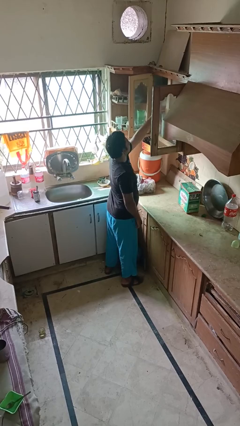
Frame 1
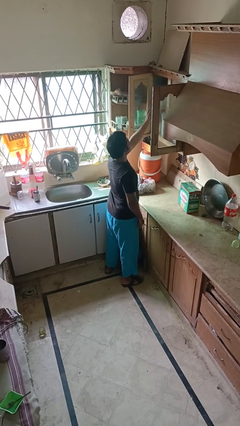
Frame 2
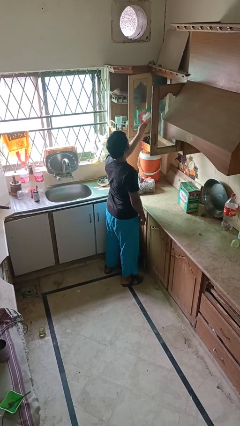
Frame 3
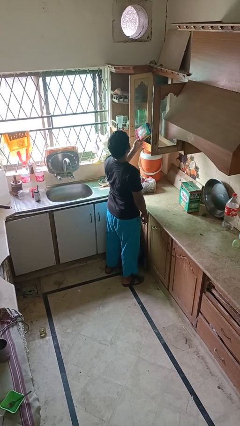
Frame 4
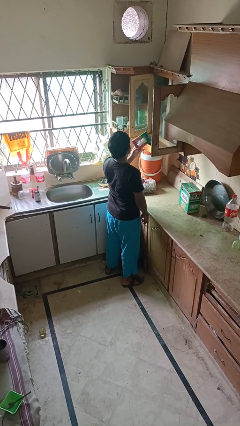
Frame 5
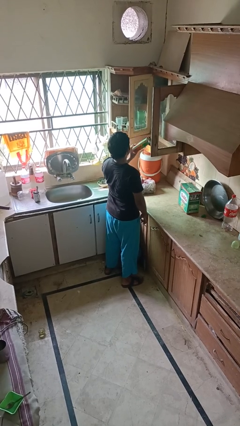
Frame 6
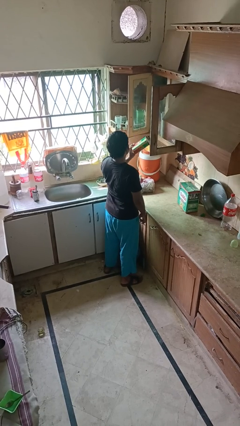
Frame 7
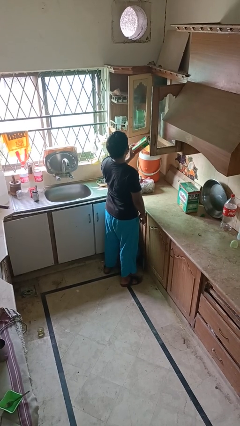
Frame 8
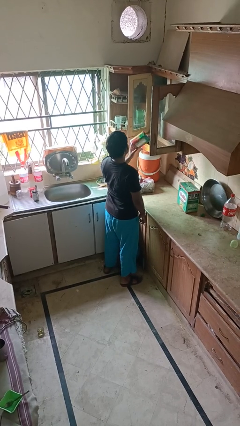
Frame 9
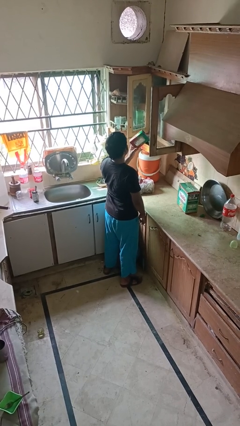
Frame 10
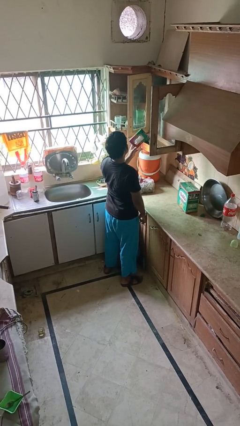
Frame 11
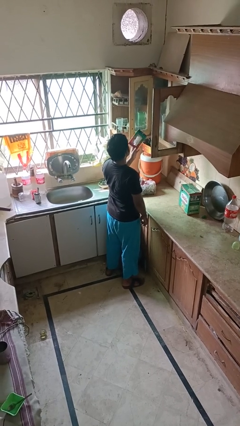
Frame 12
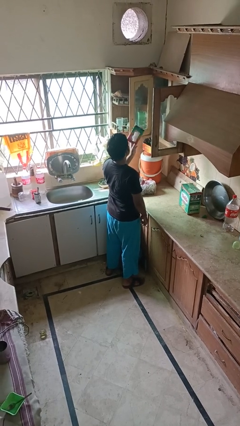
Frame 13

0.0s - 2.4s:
person picks up object from cabinet

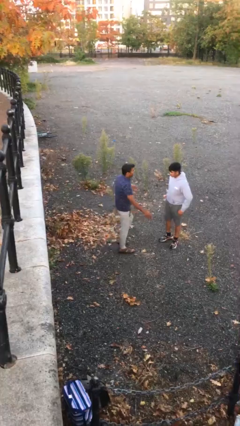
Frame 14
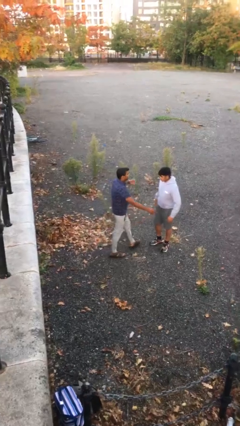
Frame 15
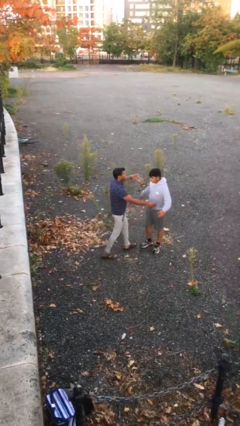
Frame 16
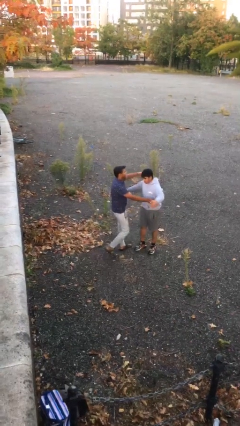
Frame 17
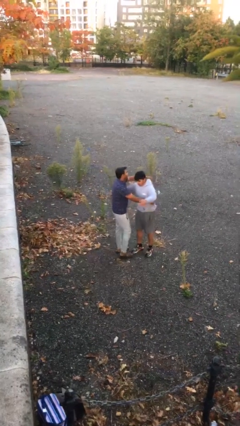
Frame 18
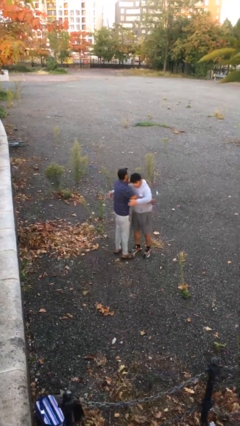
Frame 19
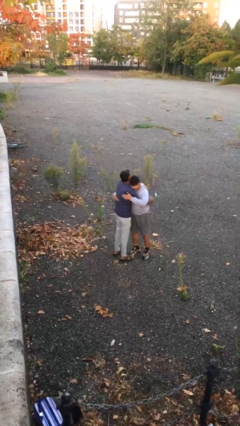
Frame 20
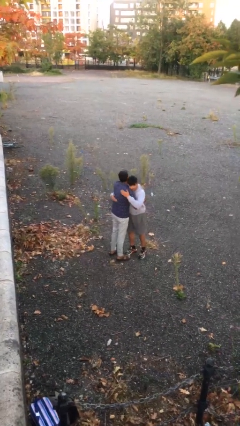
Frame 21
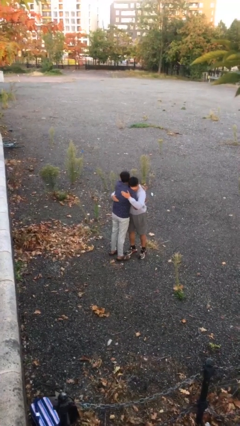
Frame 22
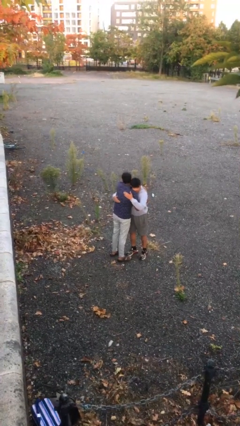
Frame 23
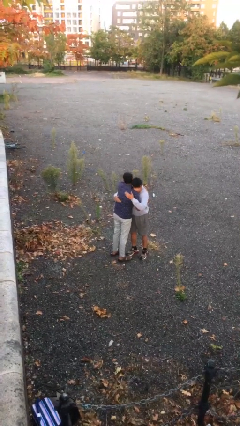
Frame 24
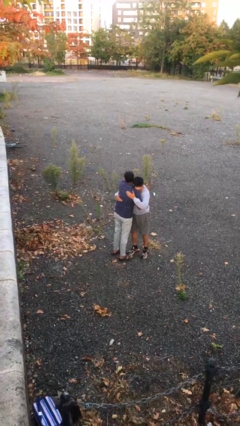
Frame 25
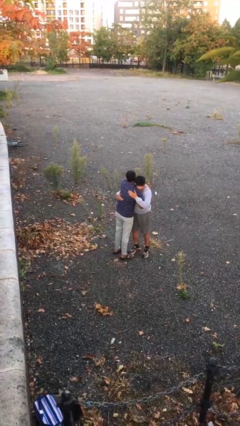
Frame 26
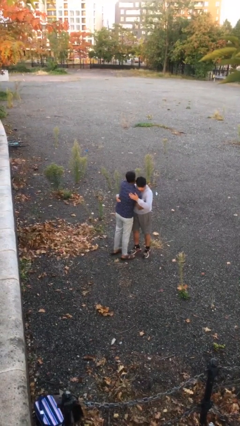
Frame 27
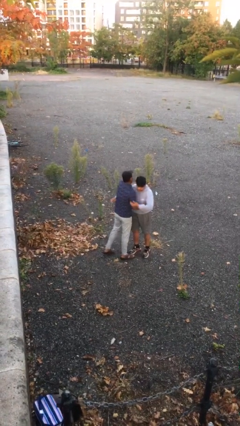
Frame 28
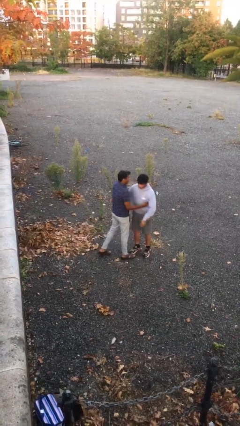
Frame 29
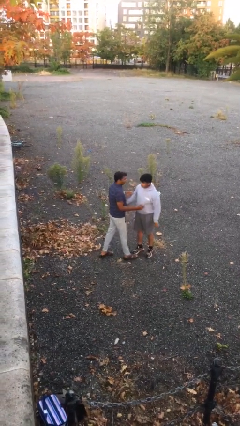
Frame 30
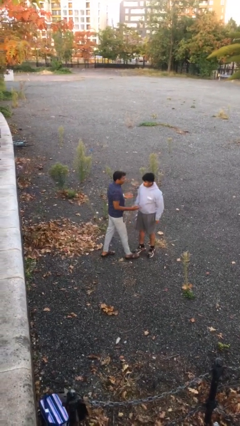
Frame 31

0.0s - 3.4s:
person embraces person

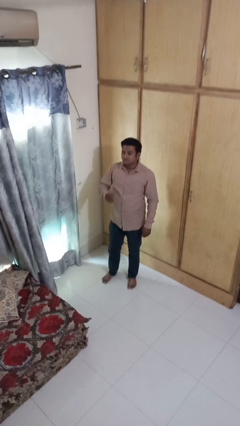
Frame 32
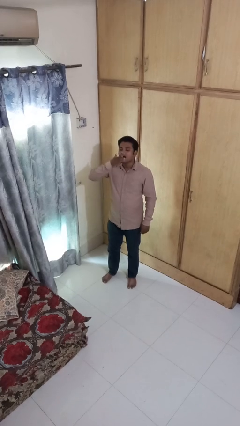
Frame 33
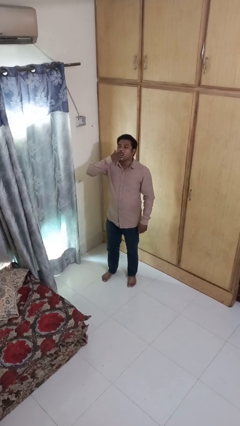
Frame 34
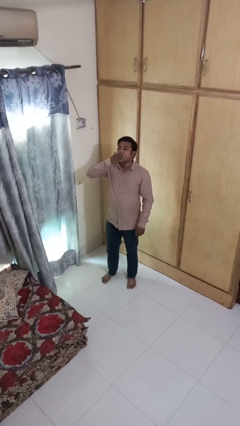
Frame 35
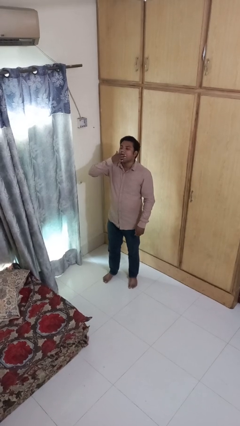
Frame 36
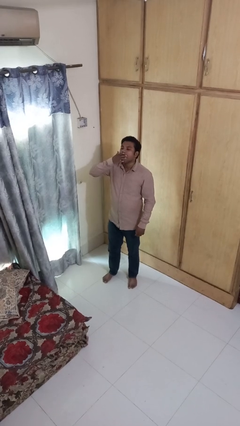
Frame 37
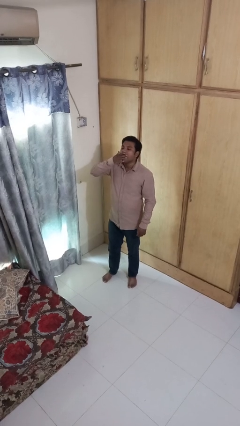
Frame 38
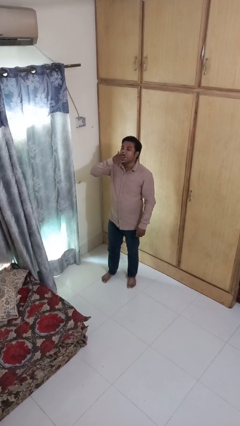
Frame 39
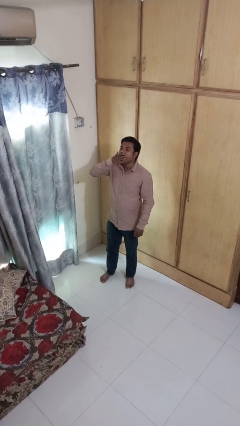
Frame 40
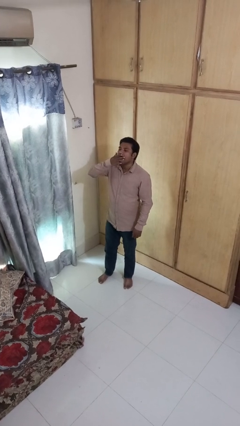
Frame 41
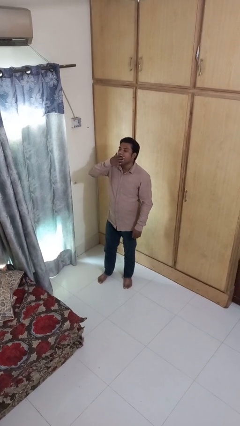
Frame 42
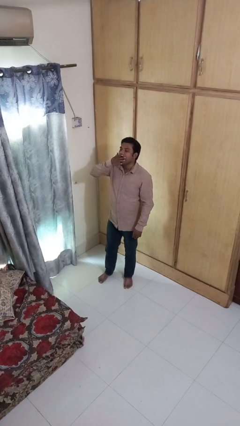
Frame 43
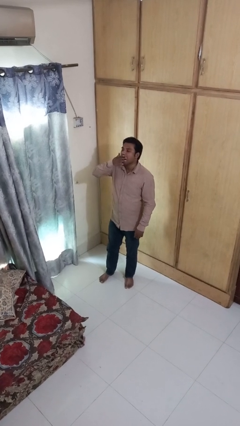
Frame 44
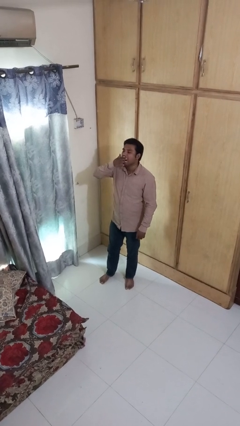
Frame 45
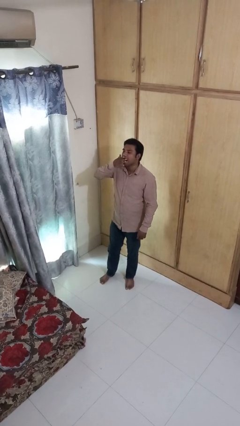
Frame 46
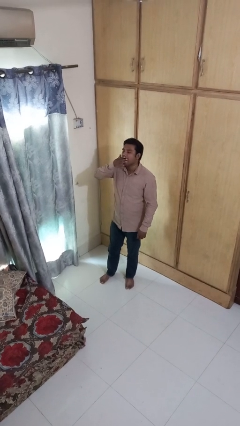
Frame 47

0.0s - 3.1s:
person yawns

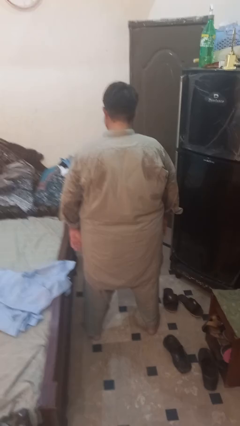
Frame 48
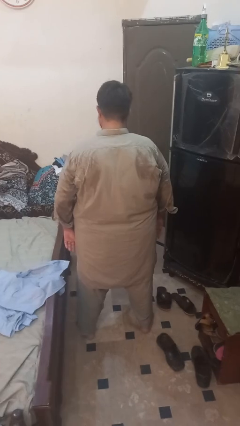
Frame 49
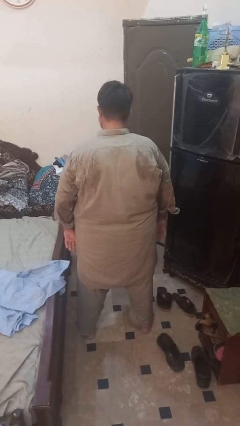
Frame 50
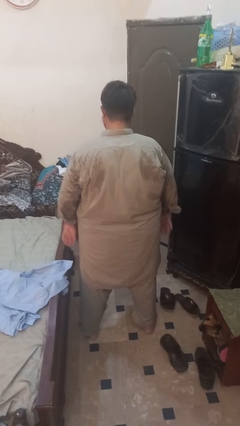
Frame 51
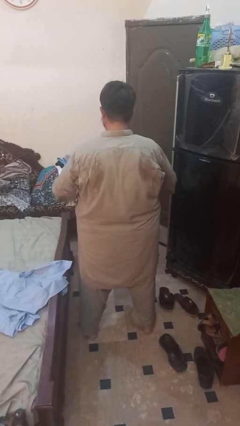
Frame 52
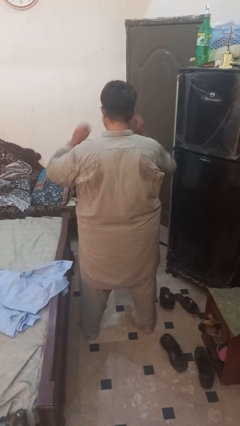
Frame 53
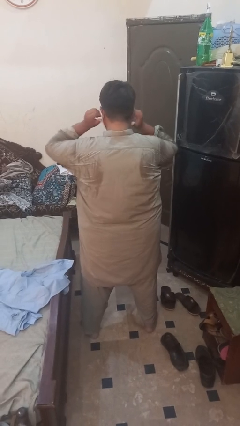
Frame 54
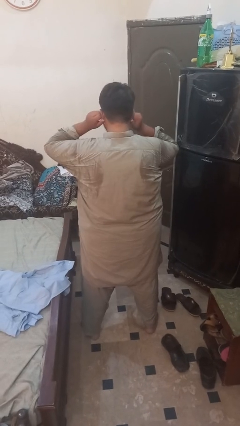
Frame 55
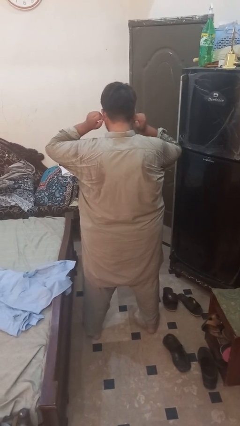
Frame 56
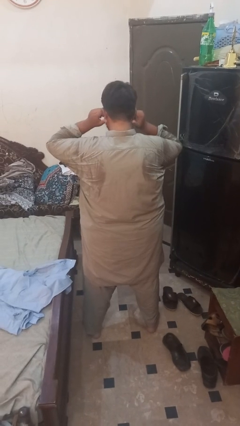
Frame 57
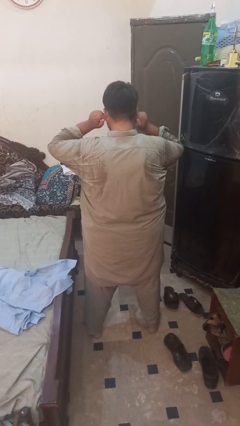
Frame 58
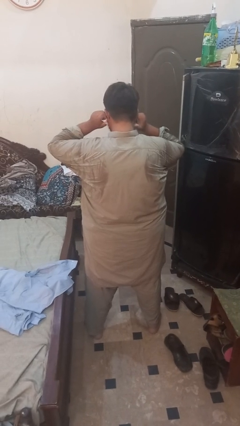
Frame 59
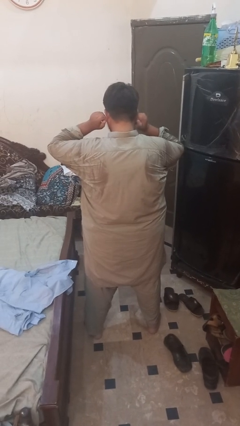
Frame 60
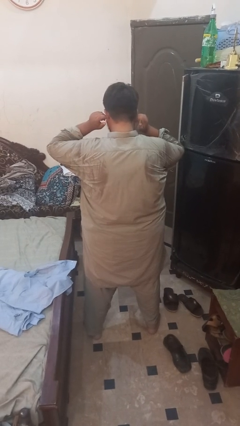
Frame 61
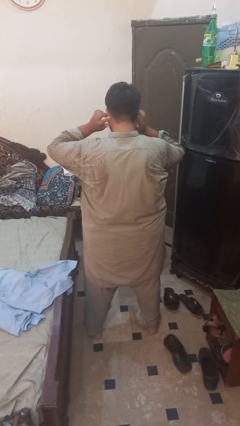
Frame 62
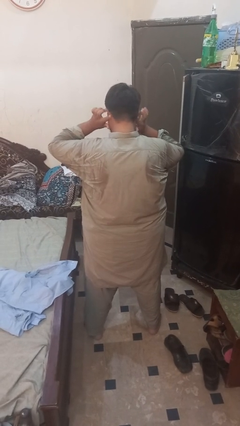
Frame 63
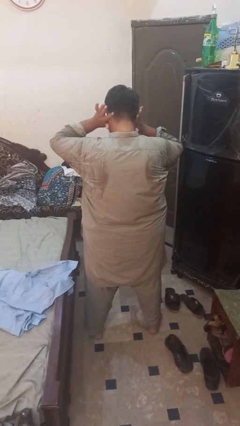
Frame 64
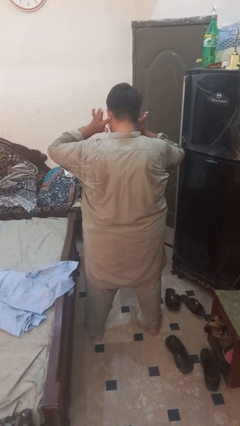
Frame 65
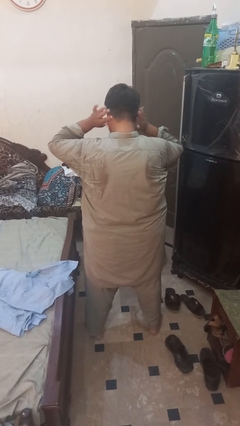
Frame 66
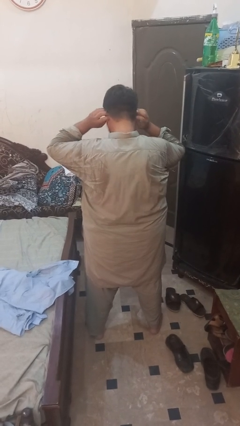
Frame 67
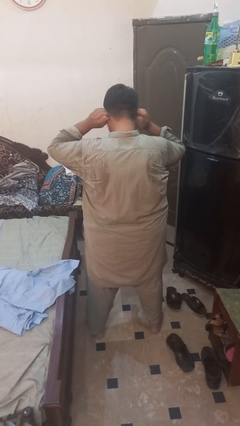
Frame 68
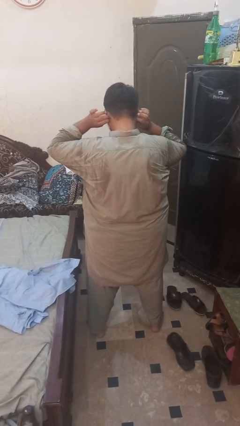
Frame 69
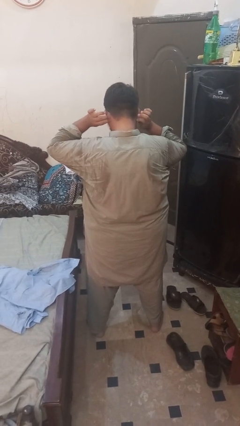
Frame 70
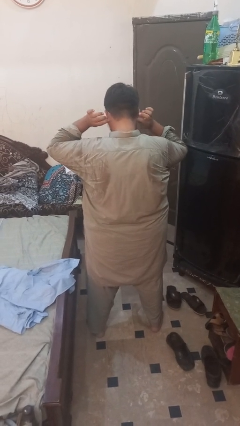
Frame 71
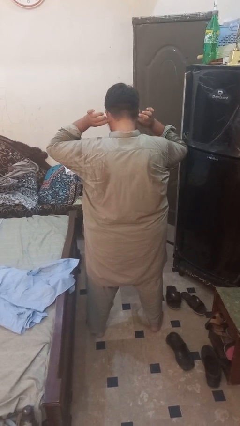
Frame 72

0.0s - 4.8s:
person touches earlobe

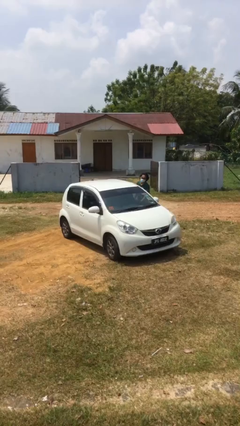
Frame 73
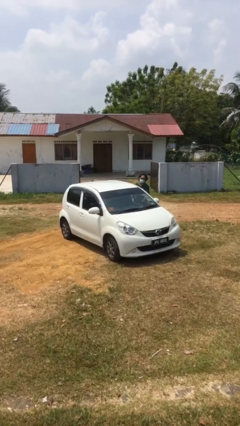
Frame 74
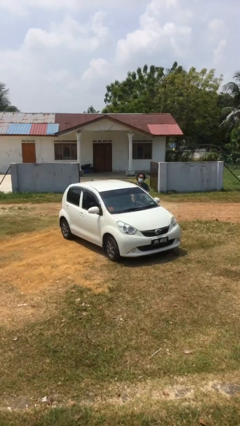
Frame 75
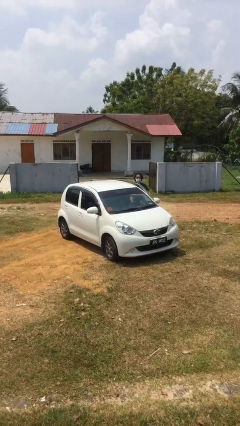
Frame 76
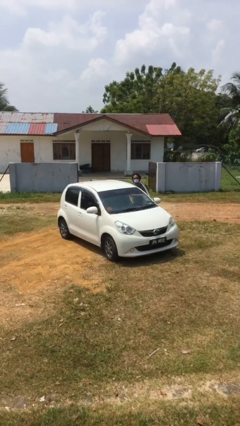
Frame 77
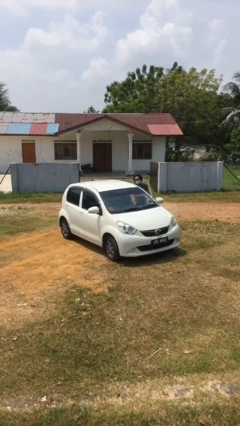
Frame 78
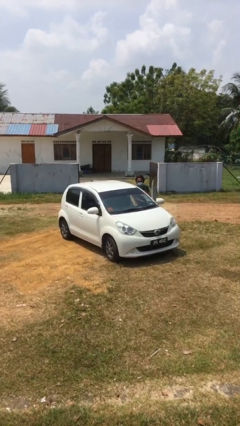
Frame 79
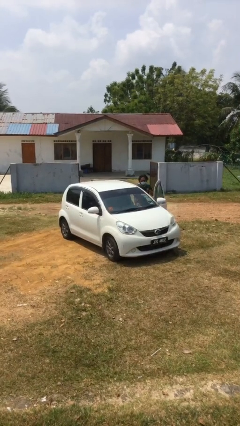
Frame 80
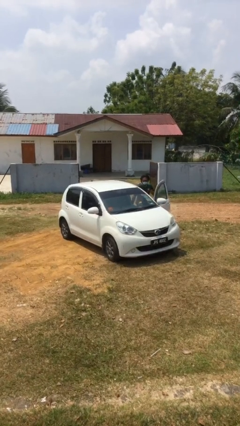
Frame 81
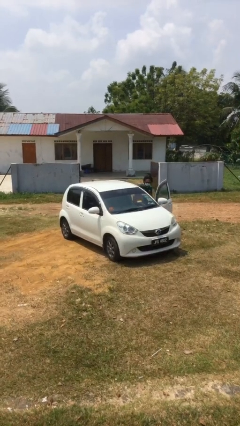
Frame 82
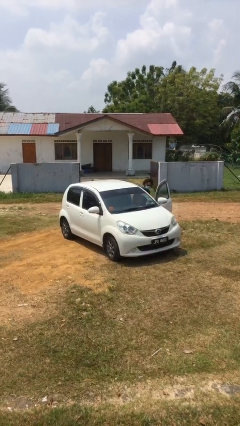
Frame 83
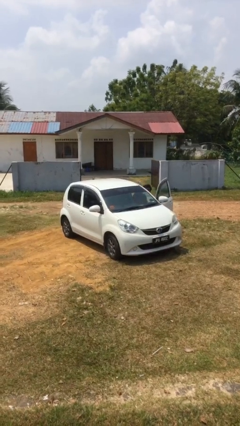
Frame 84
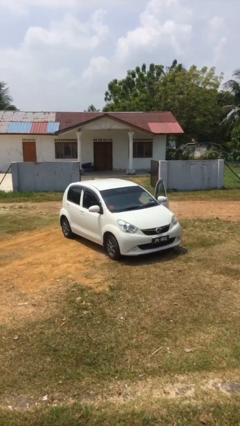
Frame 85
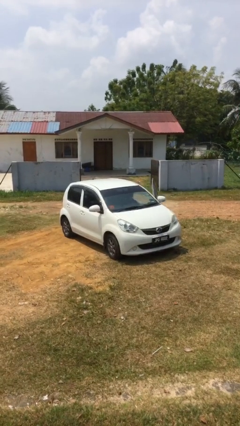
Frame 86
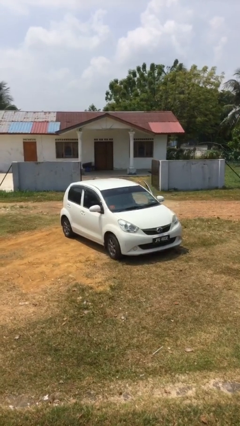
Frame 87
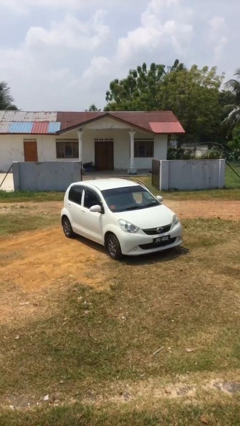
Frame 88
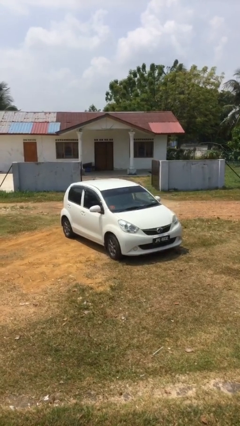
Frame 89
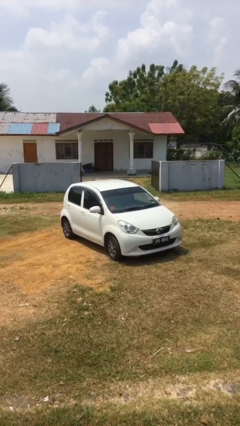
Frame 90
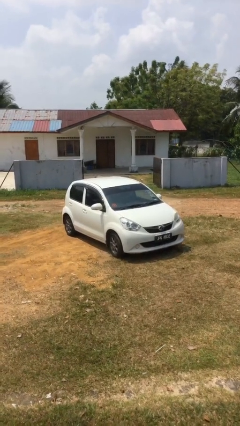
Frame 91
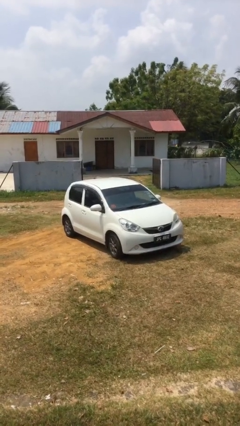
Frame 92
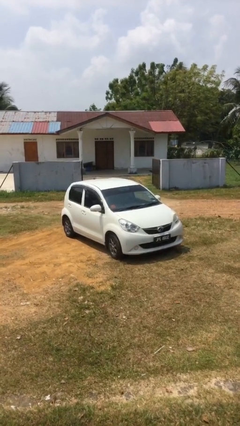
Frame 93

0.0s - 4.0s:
car picks up person
